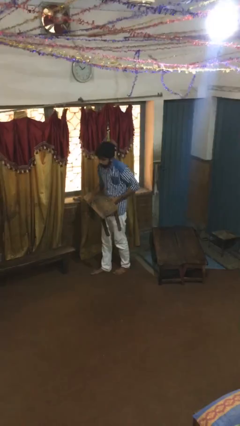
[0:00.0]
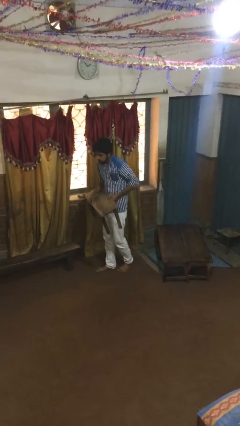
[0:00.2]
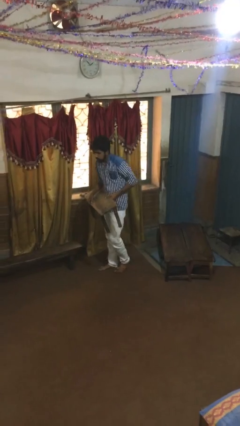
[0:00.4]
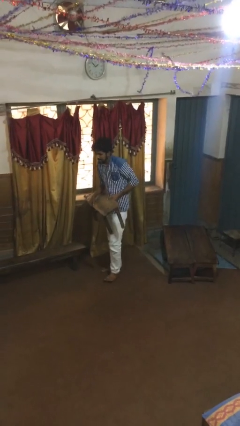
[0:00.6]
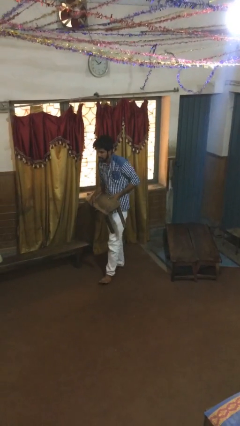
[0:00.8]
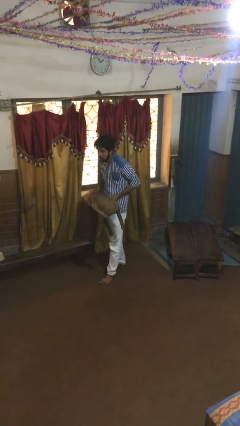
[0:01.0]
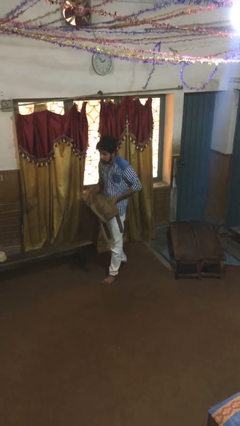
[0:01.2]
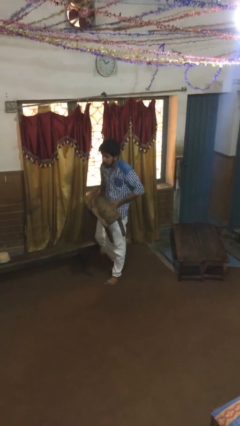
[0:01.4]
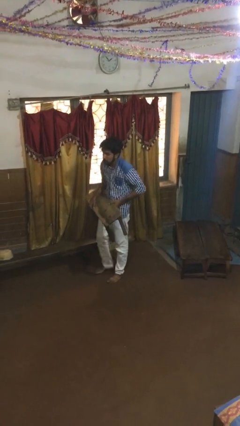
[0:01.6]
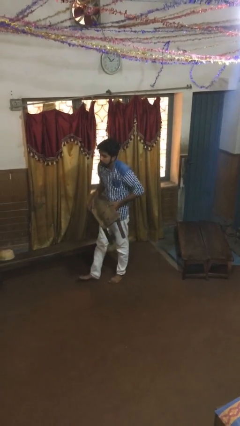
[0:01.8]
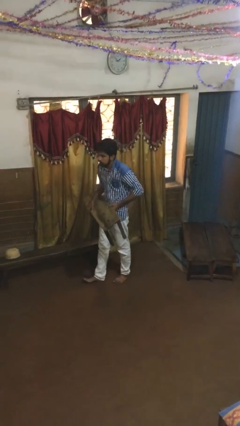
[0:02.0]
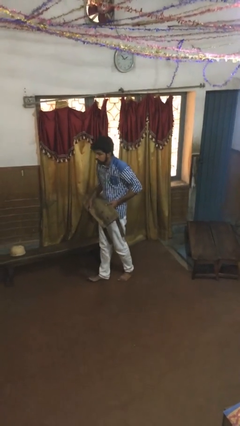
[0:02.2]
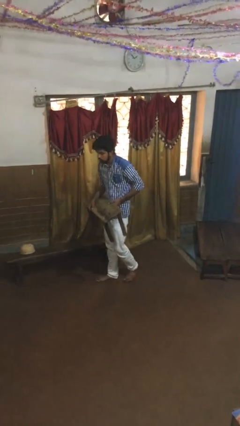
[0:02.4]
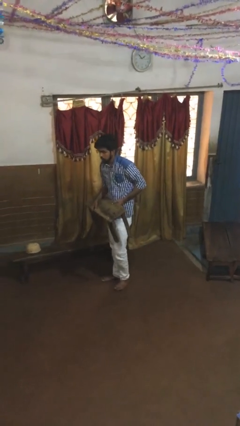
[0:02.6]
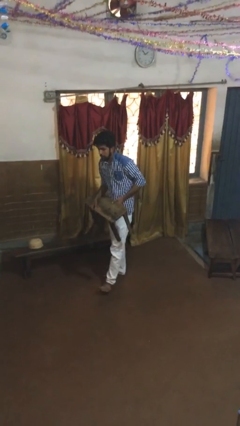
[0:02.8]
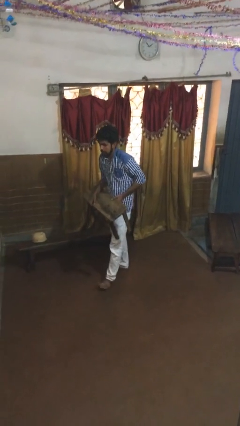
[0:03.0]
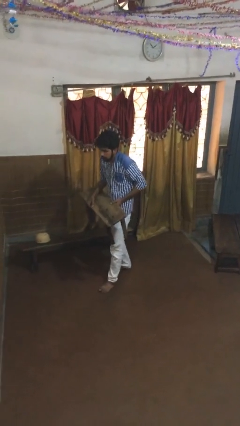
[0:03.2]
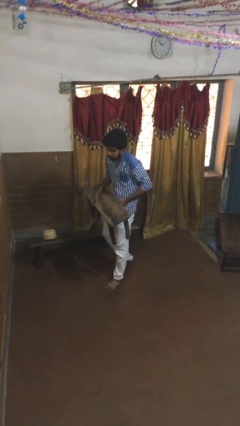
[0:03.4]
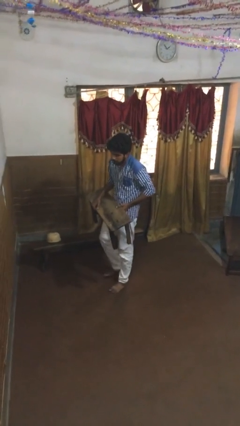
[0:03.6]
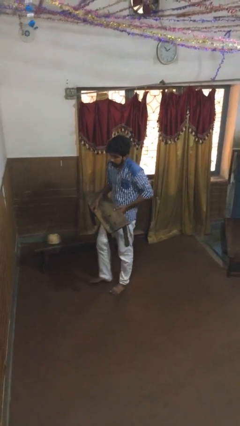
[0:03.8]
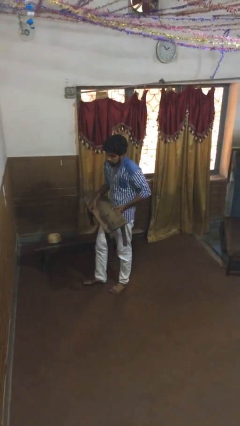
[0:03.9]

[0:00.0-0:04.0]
person carries heavy object

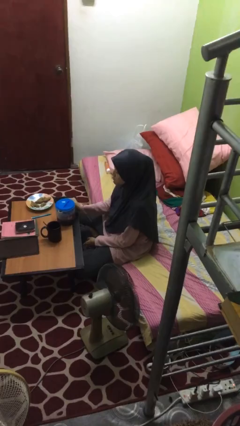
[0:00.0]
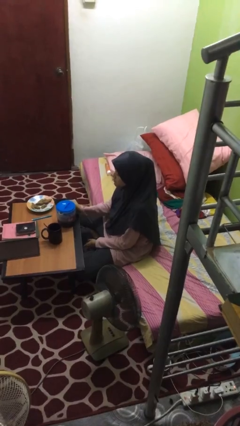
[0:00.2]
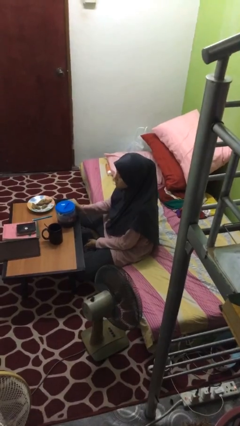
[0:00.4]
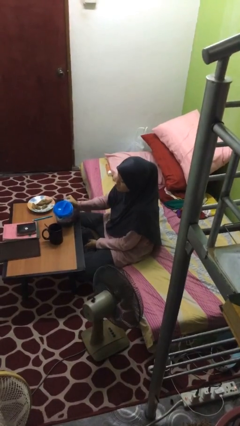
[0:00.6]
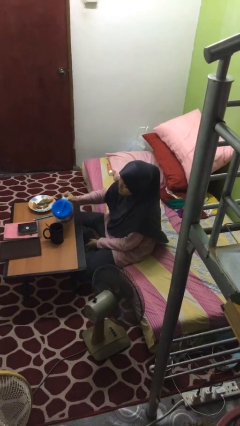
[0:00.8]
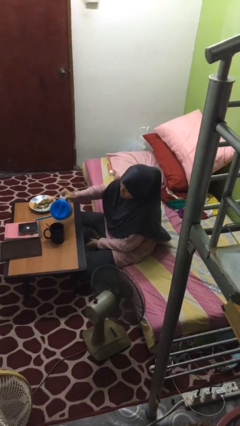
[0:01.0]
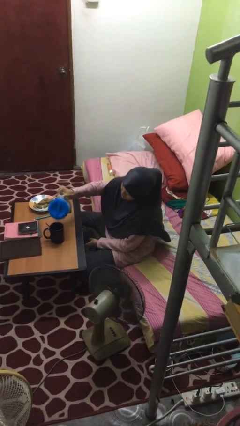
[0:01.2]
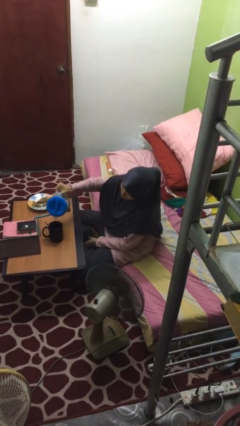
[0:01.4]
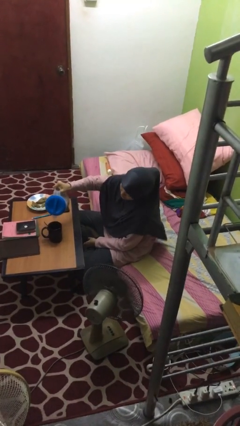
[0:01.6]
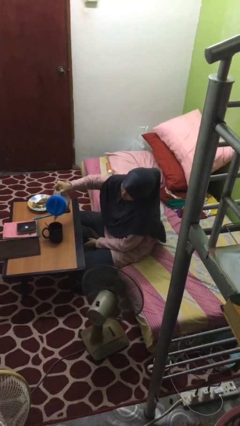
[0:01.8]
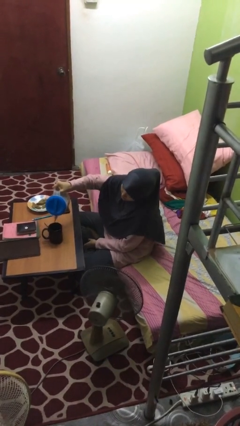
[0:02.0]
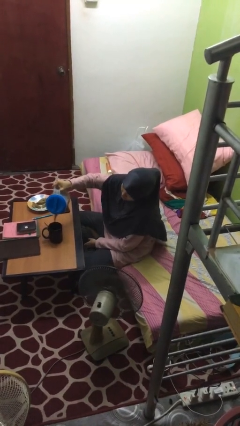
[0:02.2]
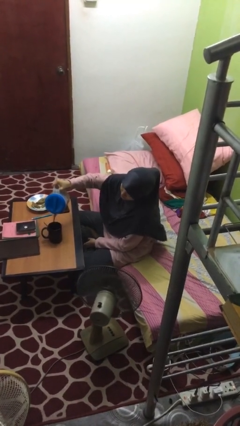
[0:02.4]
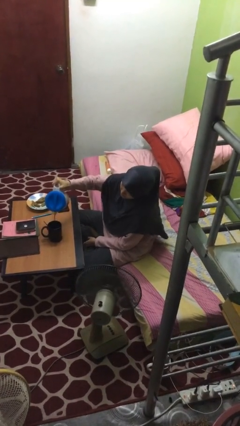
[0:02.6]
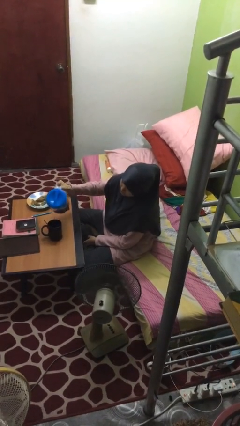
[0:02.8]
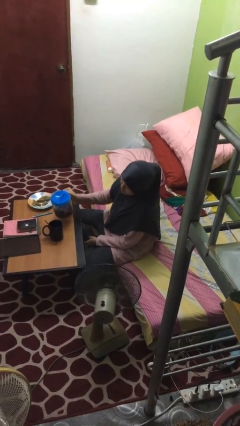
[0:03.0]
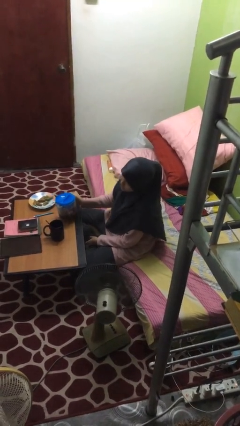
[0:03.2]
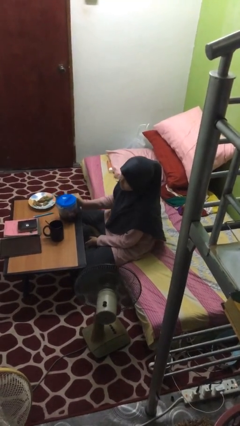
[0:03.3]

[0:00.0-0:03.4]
person pours coffee into mug

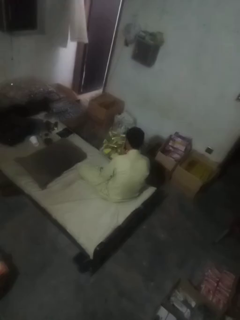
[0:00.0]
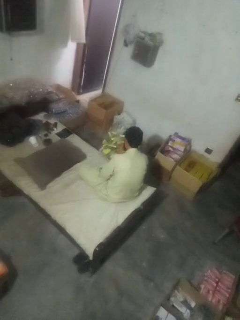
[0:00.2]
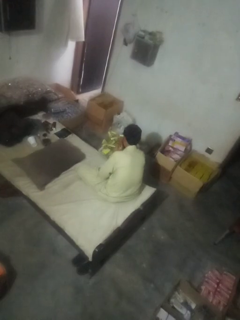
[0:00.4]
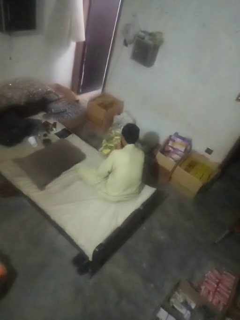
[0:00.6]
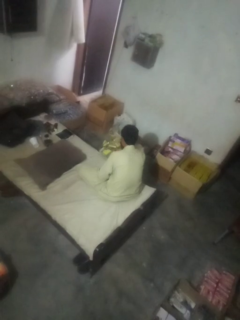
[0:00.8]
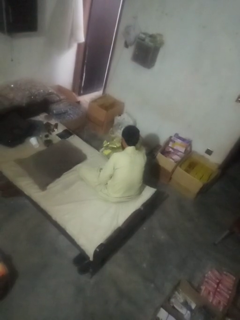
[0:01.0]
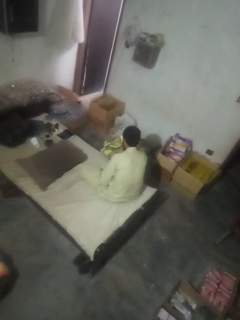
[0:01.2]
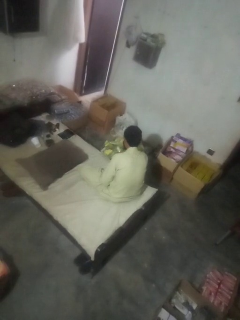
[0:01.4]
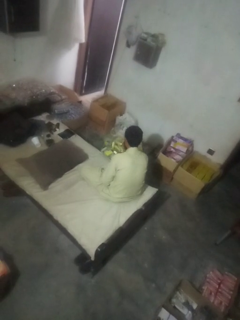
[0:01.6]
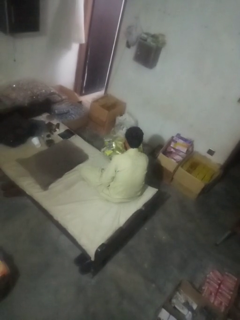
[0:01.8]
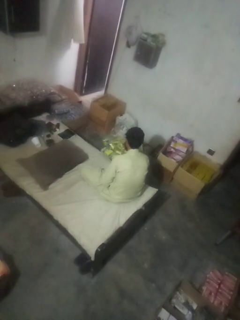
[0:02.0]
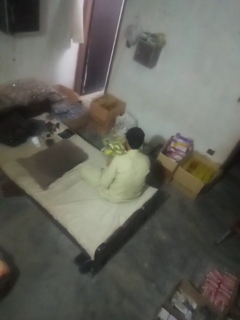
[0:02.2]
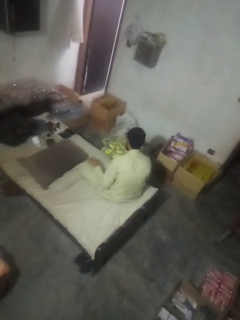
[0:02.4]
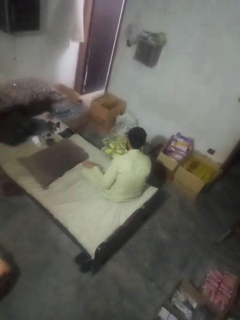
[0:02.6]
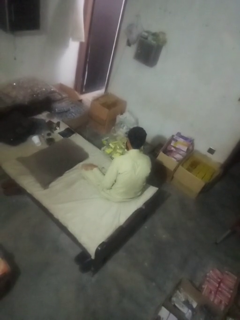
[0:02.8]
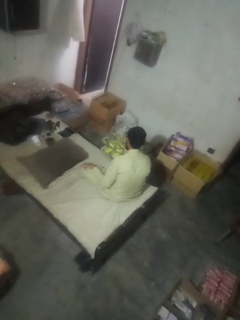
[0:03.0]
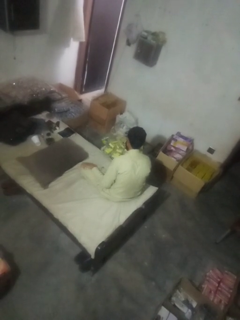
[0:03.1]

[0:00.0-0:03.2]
person searches in box

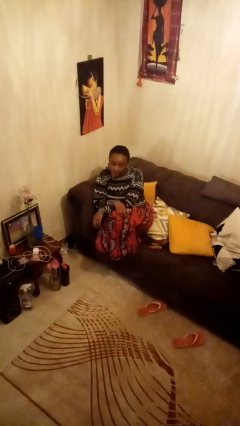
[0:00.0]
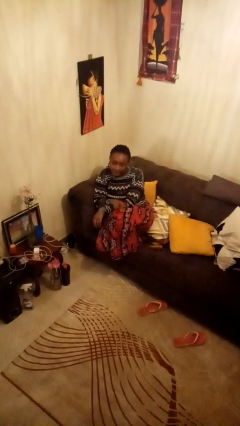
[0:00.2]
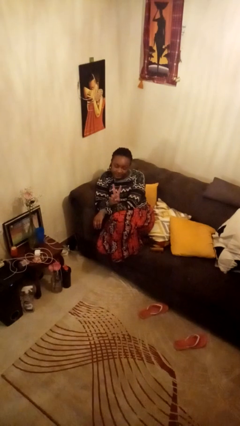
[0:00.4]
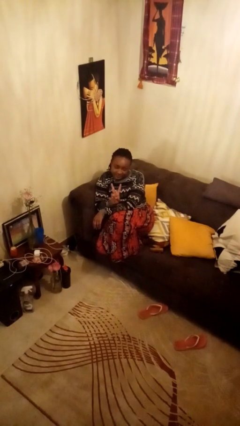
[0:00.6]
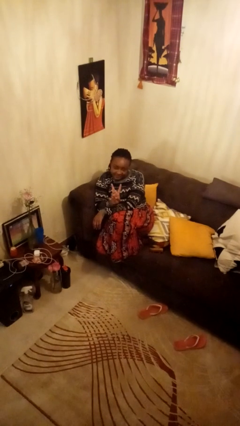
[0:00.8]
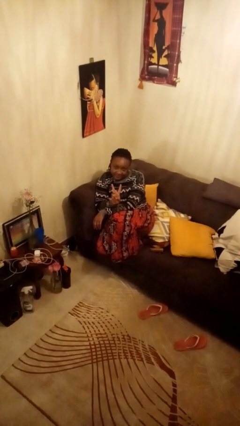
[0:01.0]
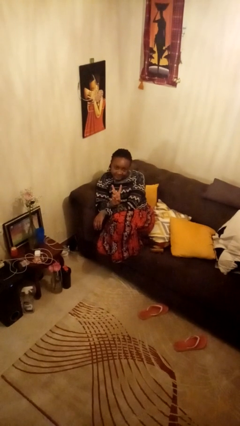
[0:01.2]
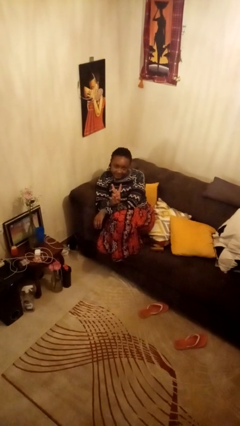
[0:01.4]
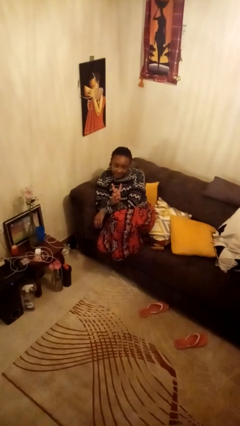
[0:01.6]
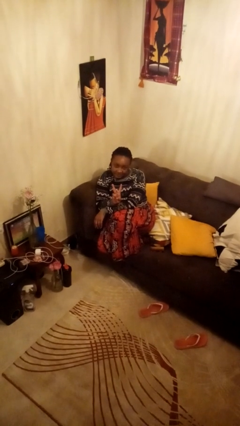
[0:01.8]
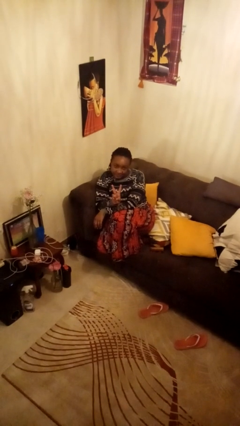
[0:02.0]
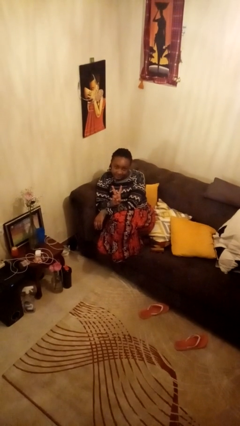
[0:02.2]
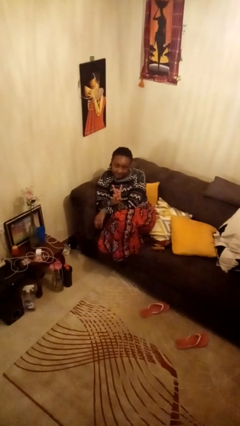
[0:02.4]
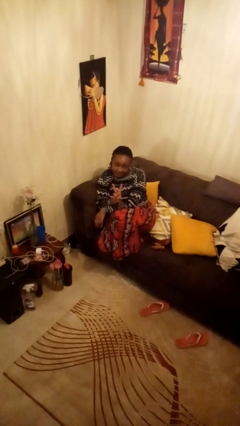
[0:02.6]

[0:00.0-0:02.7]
person gestures peace

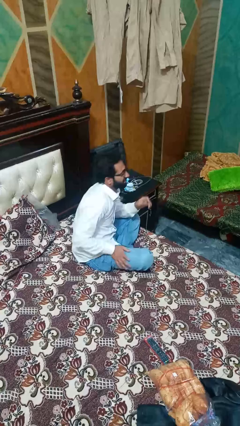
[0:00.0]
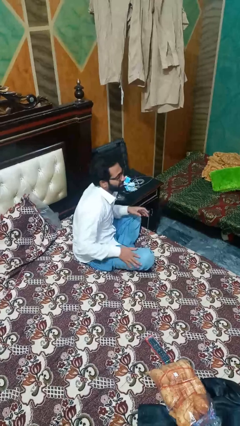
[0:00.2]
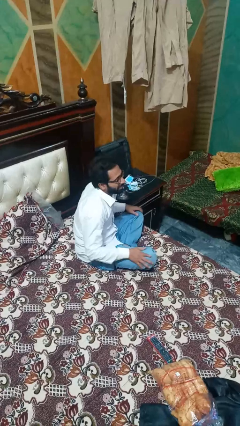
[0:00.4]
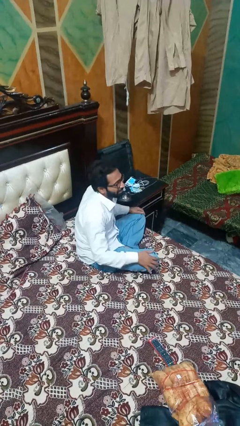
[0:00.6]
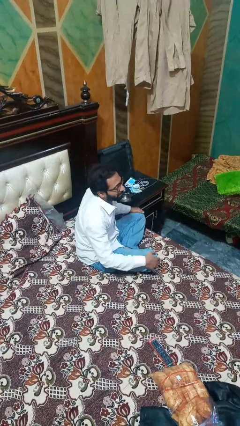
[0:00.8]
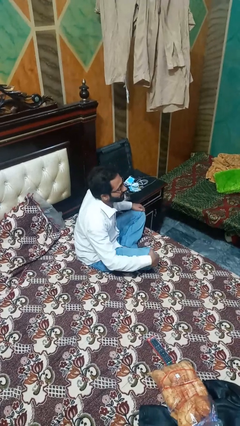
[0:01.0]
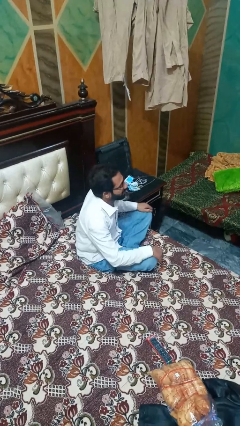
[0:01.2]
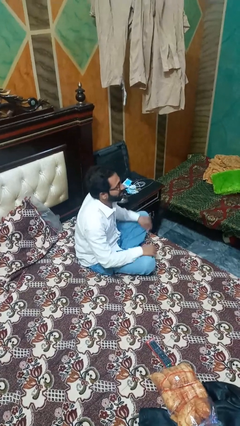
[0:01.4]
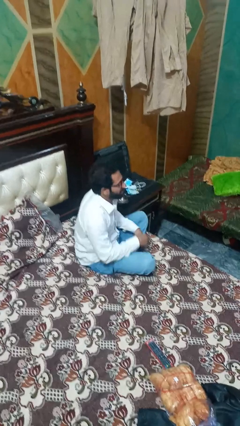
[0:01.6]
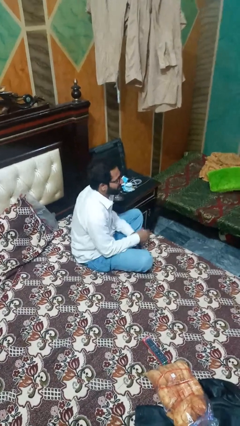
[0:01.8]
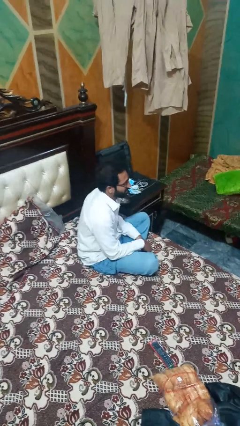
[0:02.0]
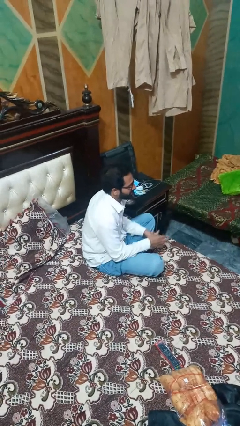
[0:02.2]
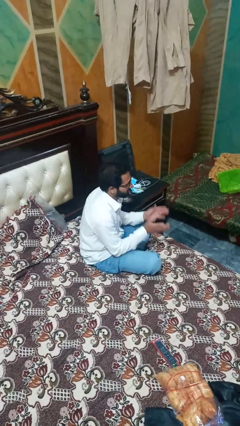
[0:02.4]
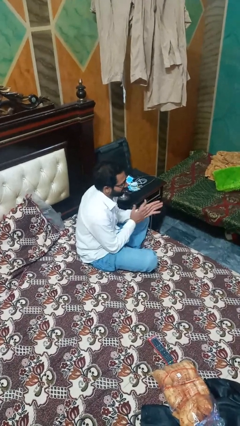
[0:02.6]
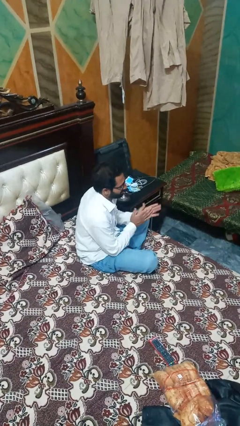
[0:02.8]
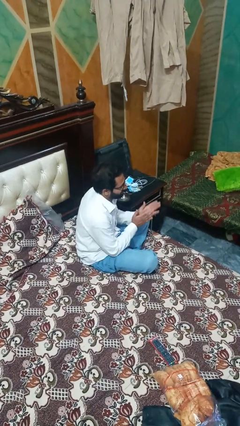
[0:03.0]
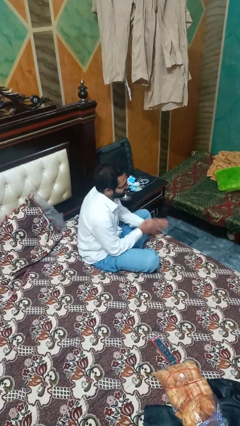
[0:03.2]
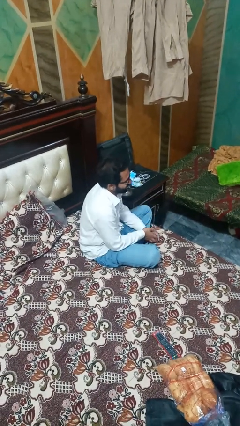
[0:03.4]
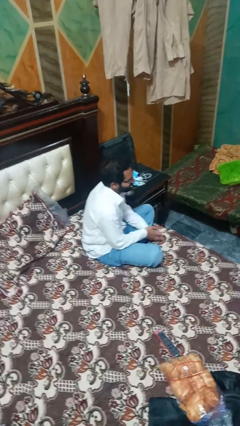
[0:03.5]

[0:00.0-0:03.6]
person claps hands

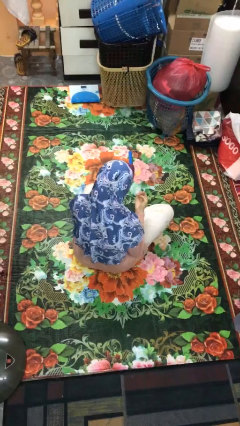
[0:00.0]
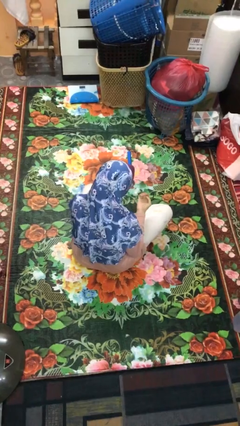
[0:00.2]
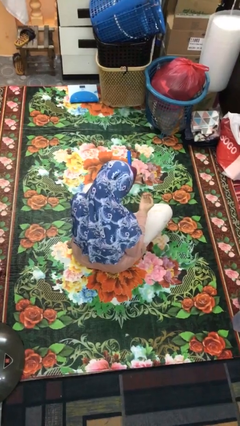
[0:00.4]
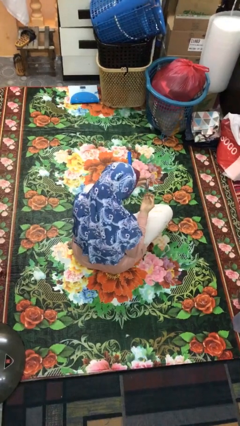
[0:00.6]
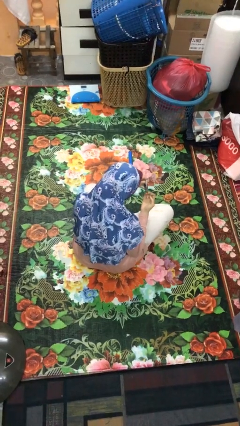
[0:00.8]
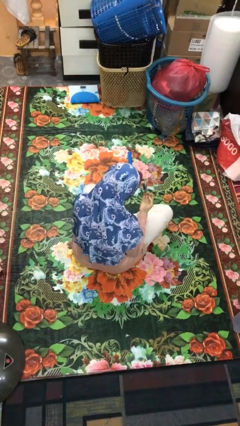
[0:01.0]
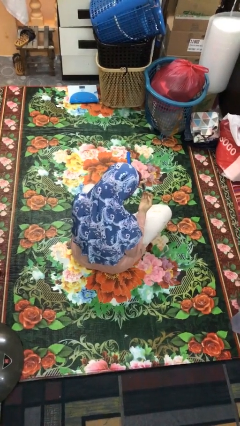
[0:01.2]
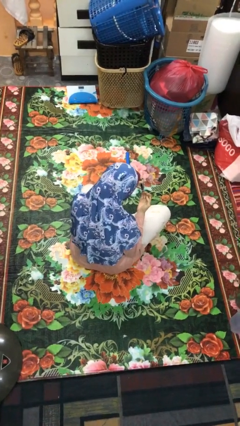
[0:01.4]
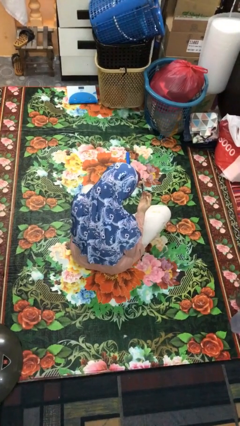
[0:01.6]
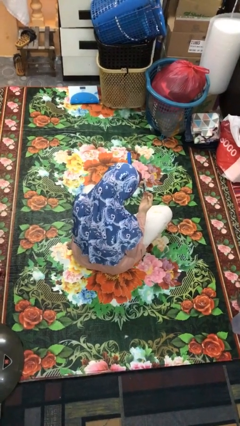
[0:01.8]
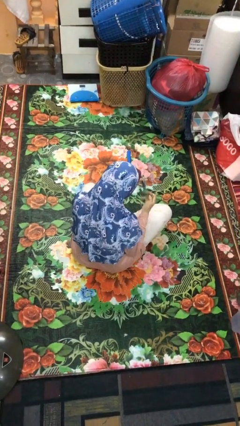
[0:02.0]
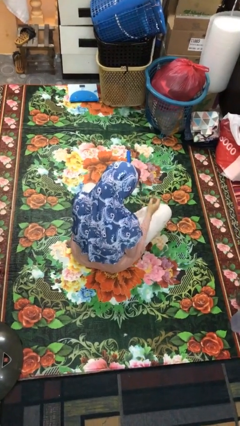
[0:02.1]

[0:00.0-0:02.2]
person clips fingernails
